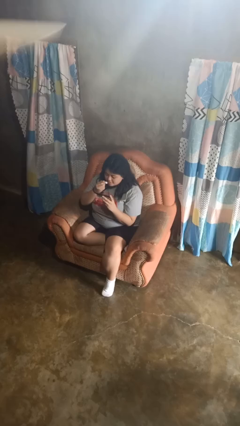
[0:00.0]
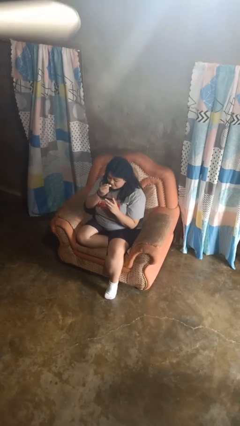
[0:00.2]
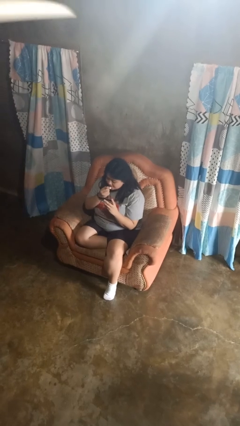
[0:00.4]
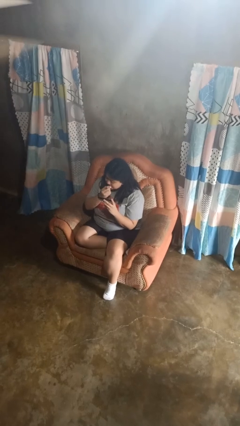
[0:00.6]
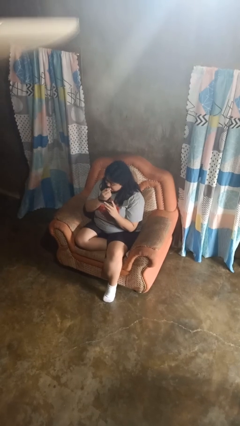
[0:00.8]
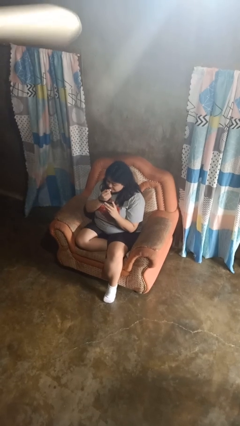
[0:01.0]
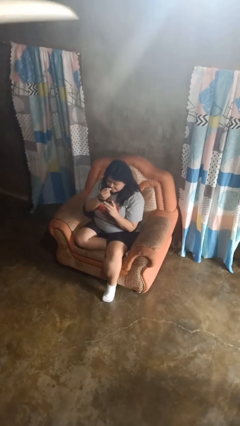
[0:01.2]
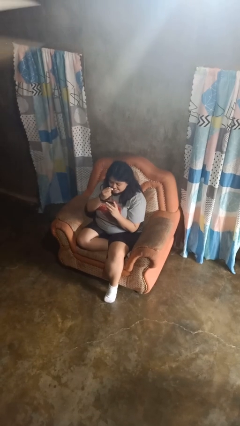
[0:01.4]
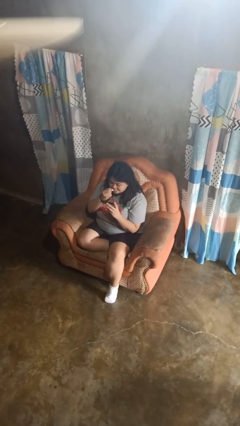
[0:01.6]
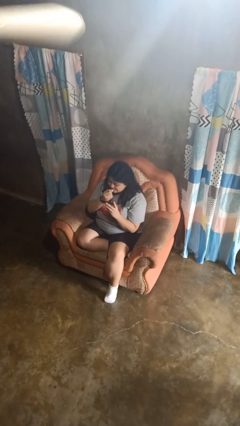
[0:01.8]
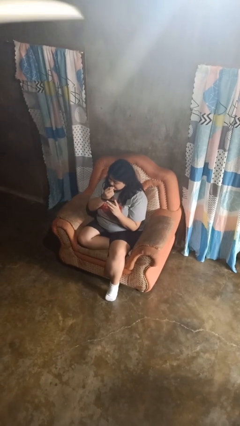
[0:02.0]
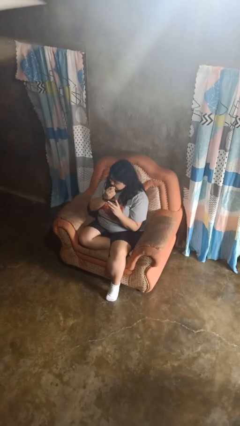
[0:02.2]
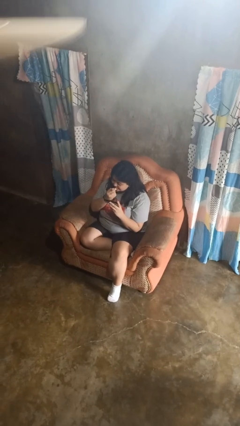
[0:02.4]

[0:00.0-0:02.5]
person applies lip makeup

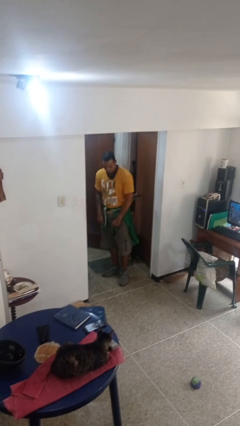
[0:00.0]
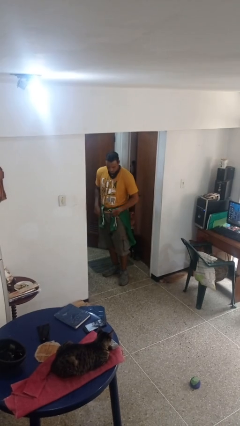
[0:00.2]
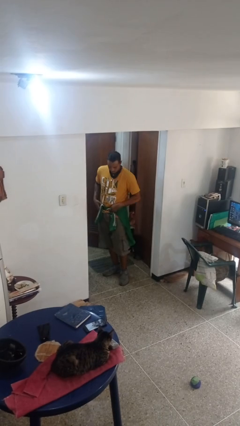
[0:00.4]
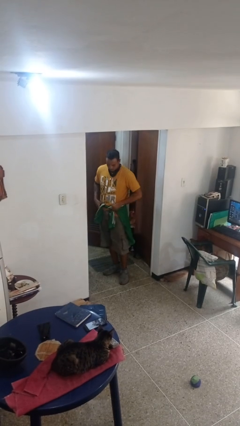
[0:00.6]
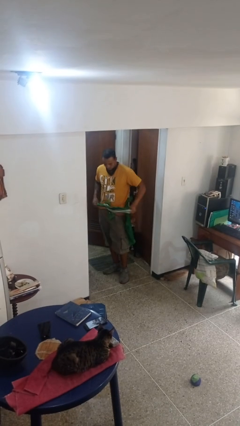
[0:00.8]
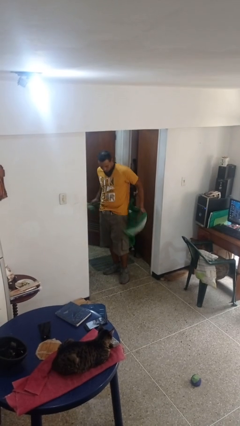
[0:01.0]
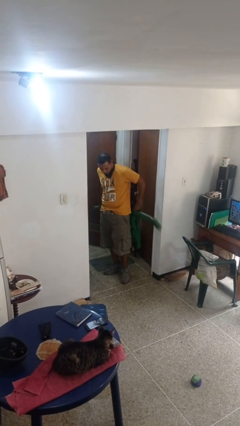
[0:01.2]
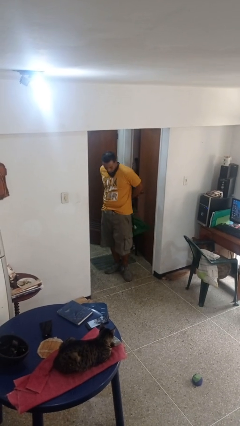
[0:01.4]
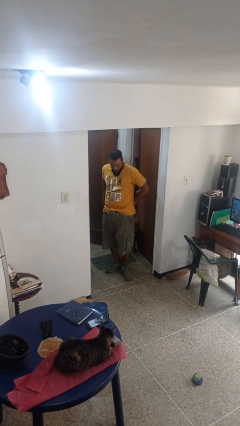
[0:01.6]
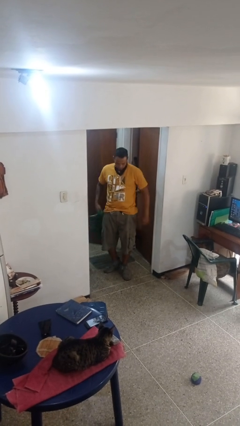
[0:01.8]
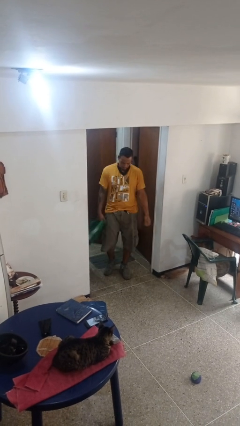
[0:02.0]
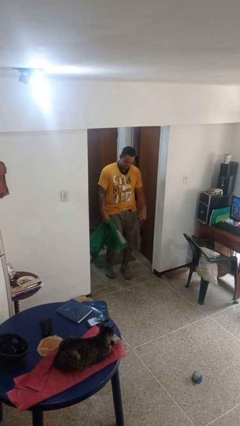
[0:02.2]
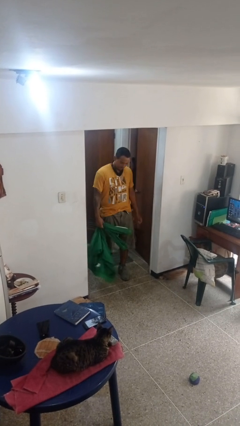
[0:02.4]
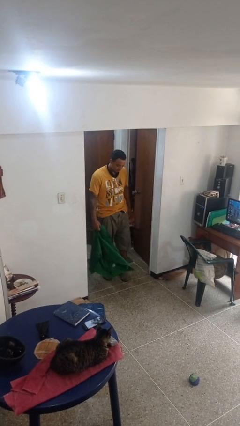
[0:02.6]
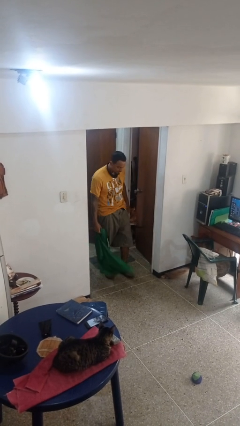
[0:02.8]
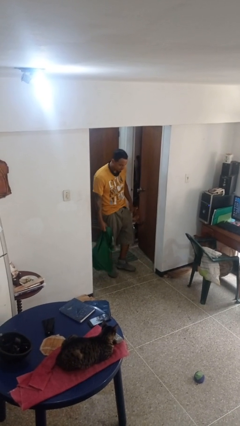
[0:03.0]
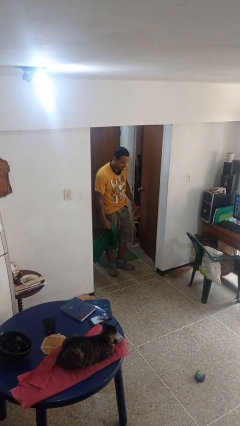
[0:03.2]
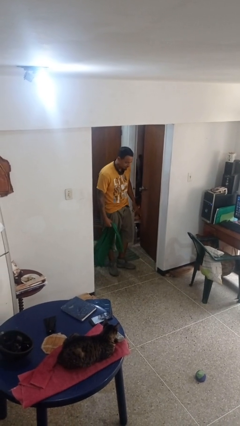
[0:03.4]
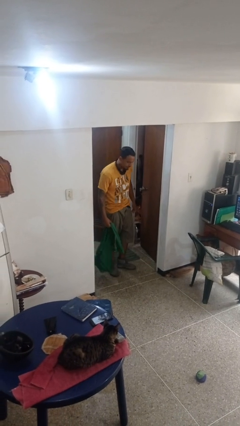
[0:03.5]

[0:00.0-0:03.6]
person unties jacket around waist

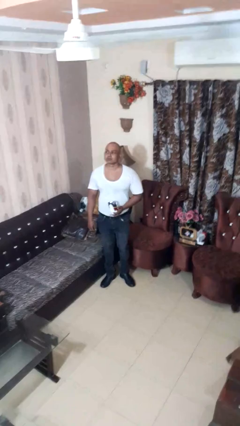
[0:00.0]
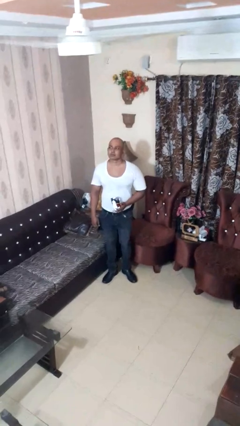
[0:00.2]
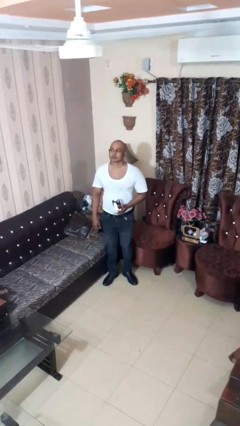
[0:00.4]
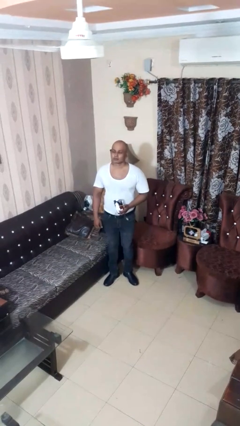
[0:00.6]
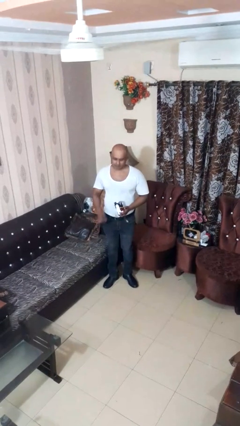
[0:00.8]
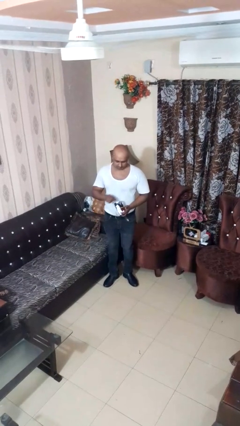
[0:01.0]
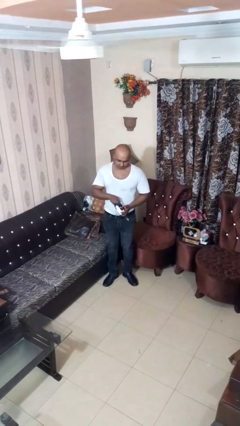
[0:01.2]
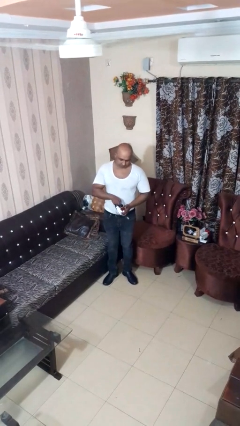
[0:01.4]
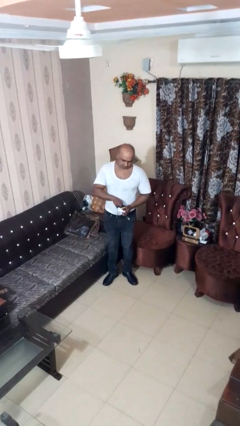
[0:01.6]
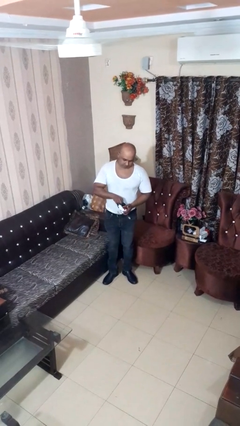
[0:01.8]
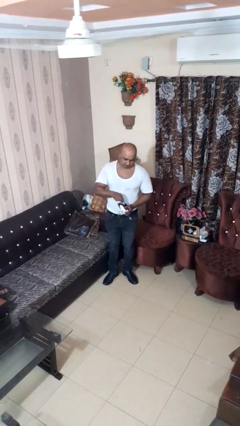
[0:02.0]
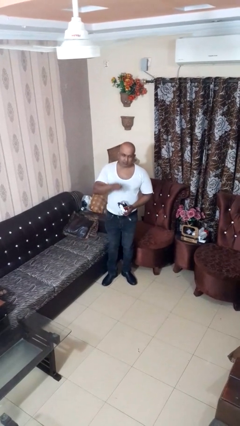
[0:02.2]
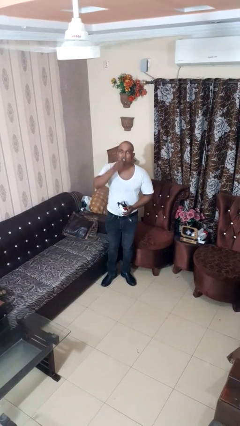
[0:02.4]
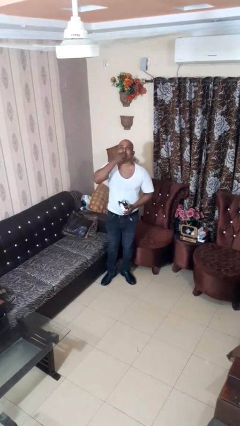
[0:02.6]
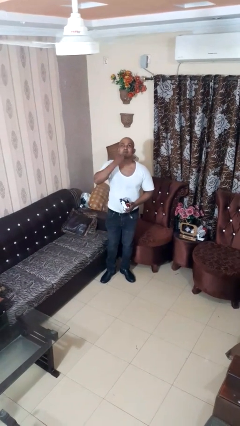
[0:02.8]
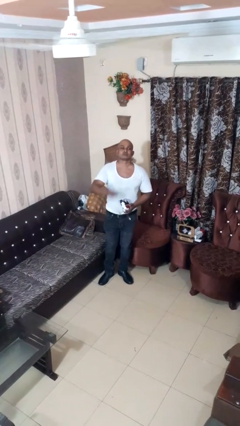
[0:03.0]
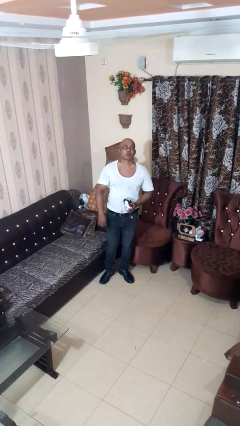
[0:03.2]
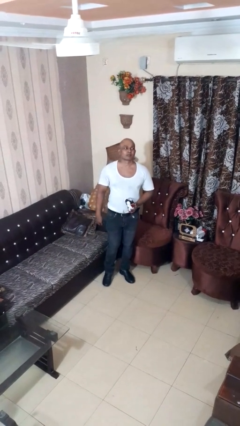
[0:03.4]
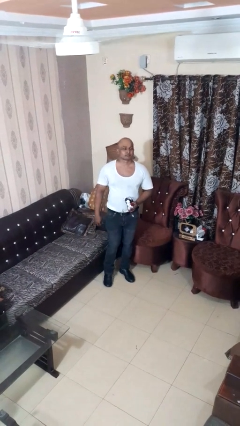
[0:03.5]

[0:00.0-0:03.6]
person eats snack from bag

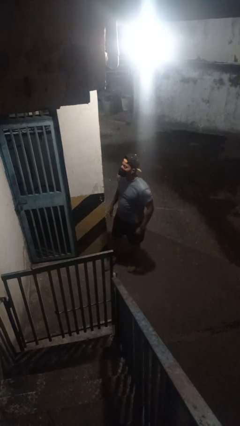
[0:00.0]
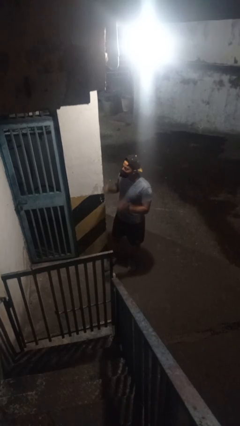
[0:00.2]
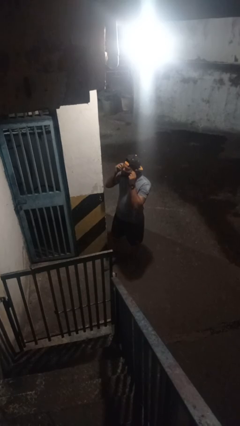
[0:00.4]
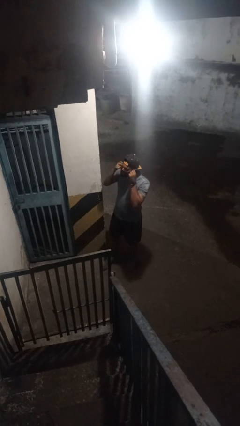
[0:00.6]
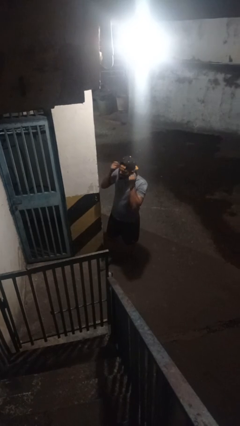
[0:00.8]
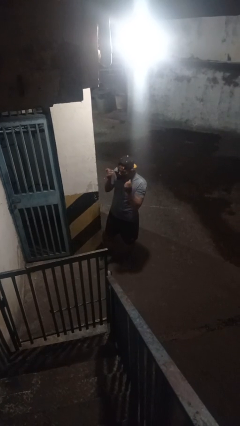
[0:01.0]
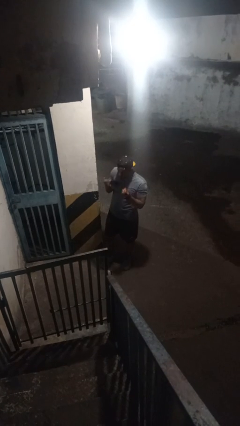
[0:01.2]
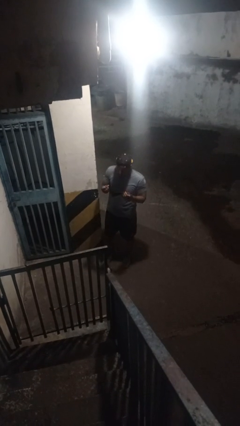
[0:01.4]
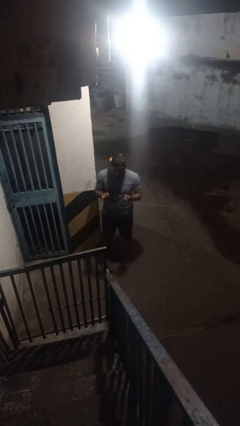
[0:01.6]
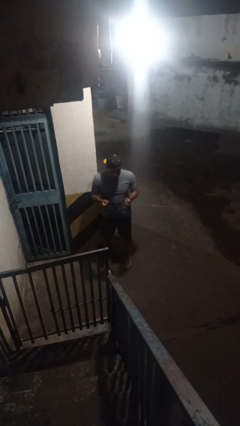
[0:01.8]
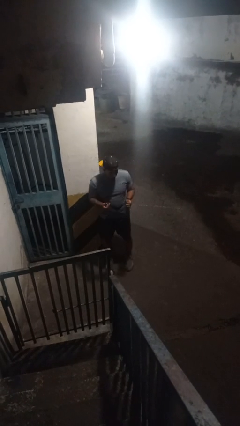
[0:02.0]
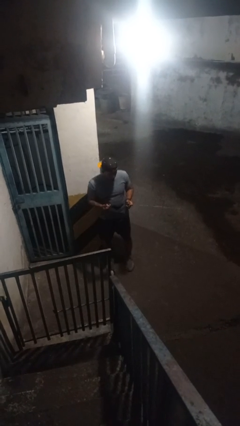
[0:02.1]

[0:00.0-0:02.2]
person takes off facemask

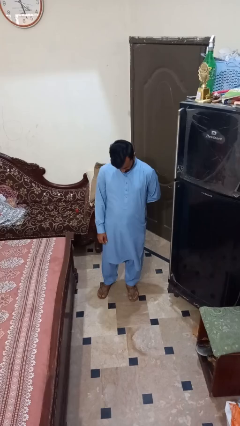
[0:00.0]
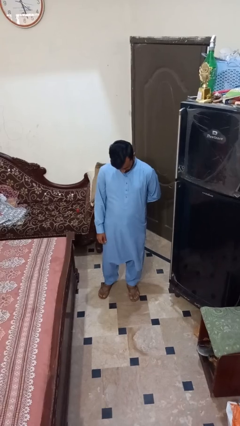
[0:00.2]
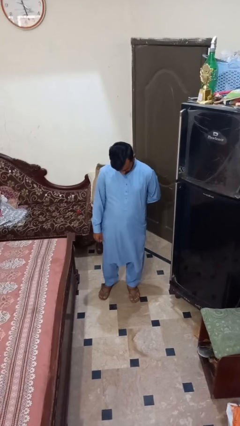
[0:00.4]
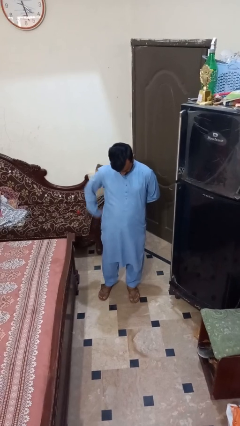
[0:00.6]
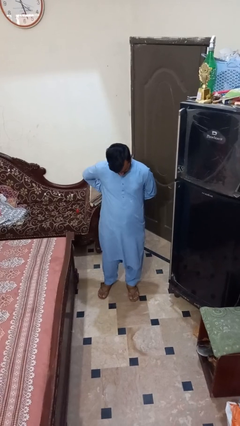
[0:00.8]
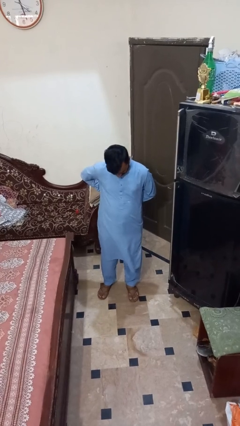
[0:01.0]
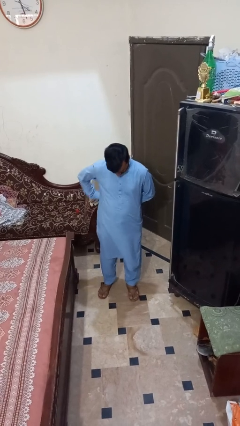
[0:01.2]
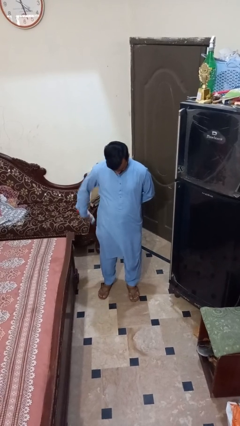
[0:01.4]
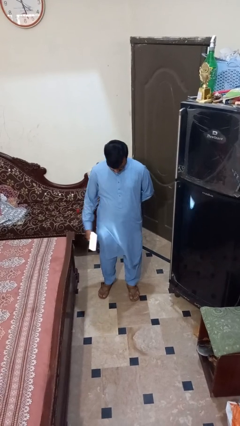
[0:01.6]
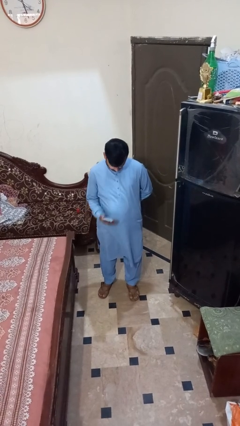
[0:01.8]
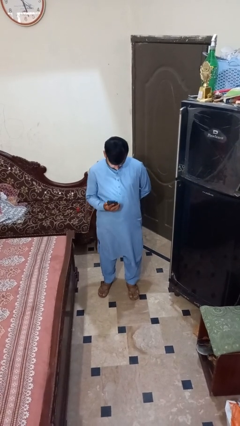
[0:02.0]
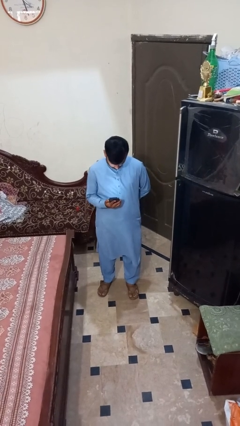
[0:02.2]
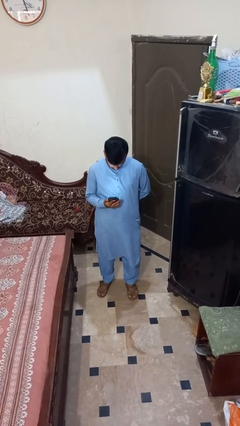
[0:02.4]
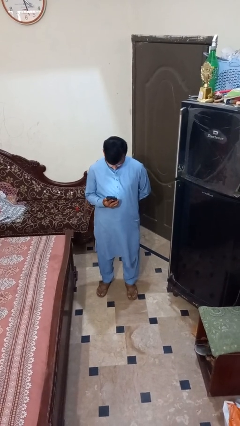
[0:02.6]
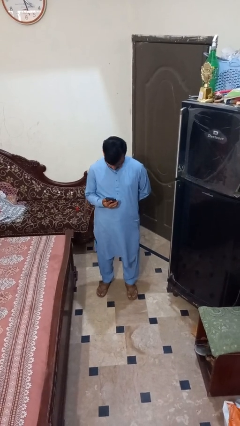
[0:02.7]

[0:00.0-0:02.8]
person takes phone from pocket

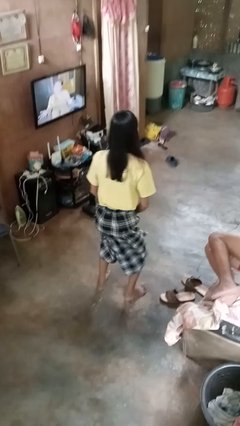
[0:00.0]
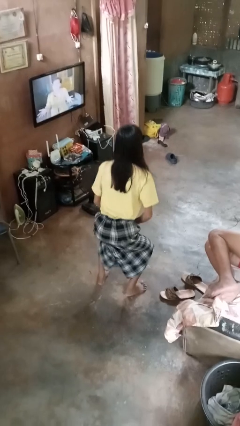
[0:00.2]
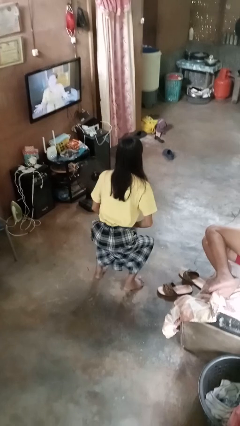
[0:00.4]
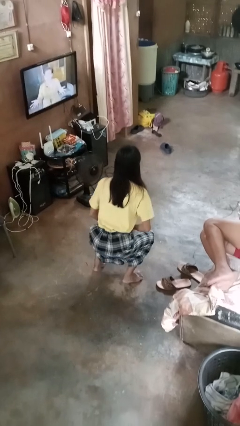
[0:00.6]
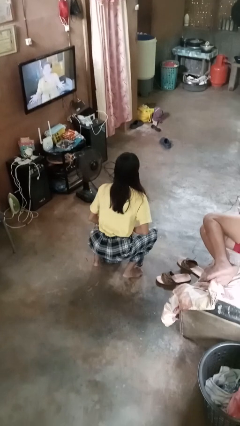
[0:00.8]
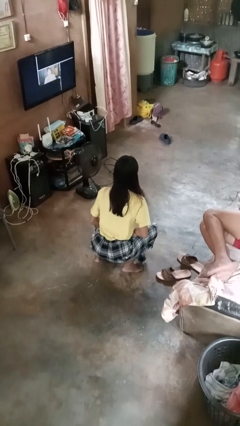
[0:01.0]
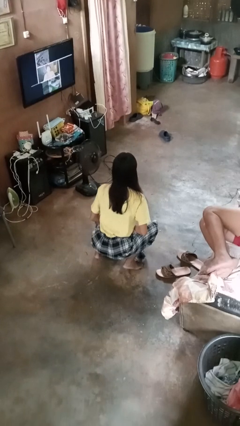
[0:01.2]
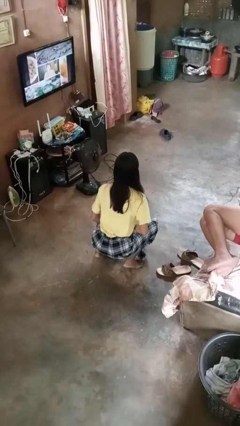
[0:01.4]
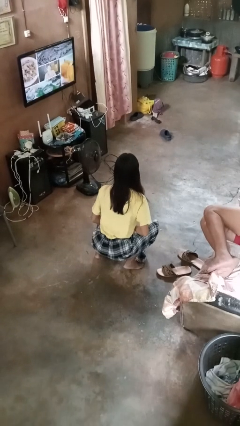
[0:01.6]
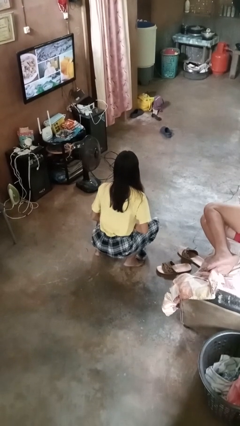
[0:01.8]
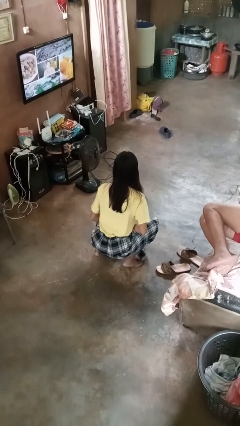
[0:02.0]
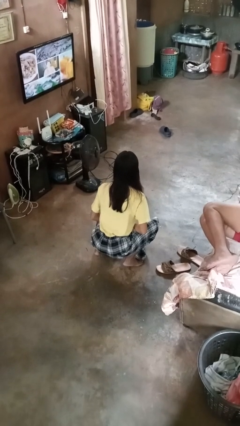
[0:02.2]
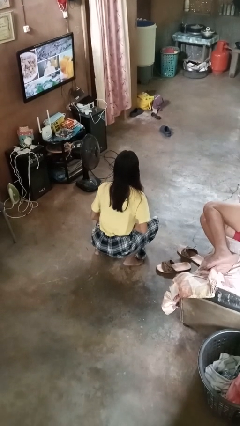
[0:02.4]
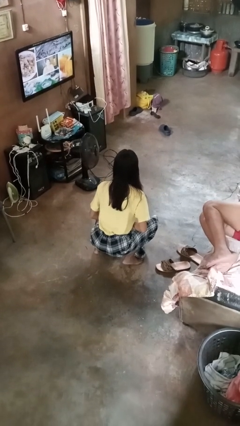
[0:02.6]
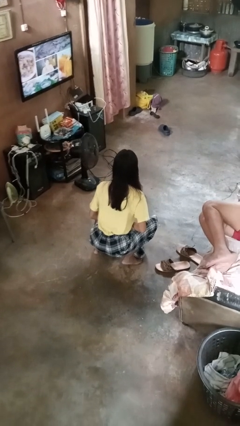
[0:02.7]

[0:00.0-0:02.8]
person squats
